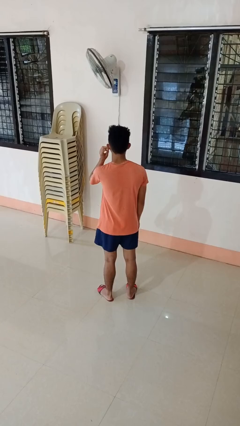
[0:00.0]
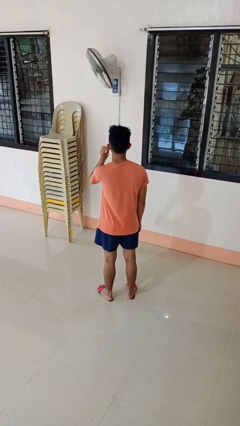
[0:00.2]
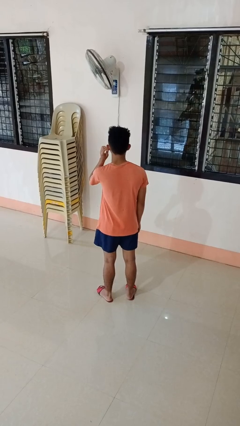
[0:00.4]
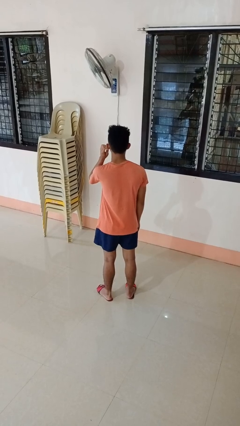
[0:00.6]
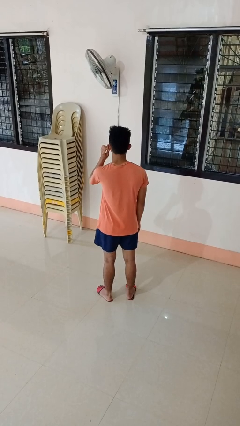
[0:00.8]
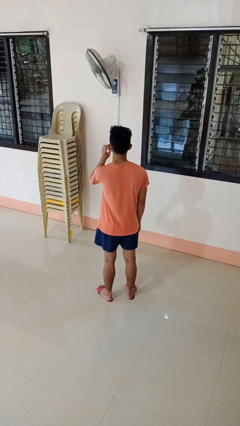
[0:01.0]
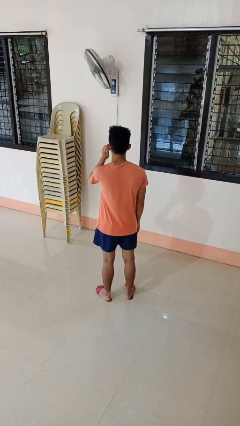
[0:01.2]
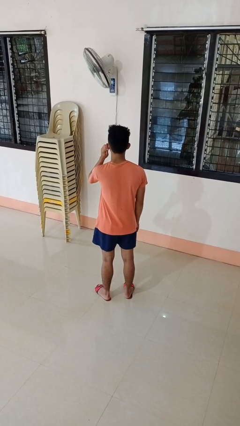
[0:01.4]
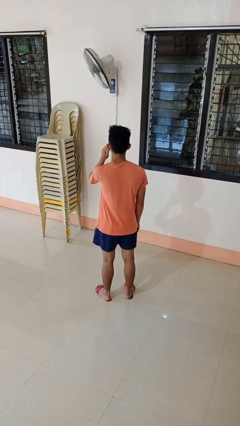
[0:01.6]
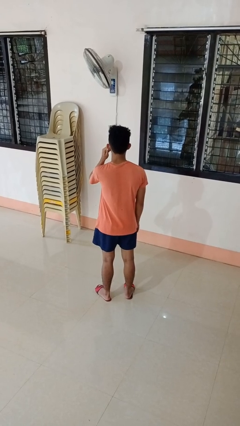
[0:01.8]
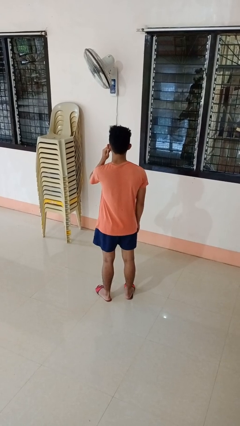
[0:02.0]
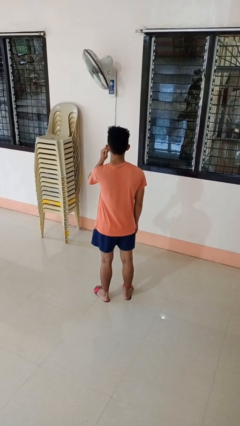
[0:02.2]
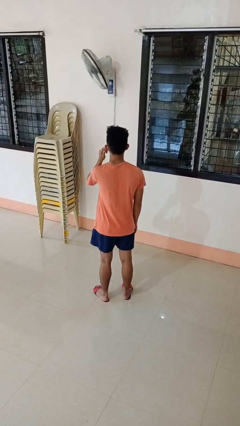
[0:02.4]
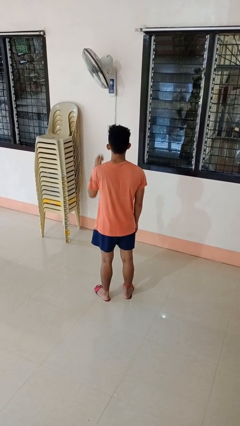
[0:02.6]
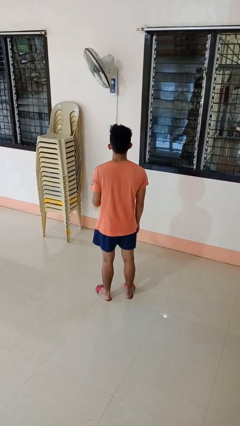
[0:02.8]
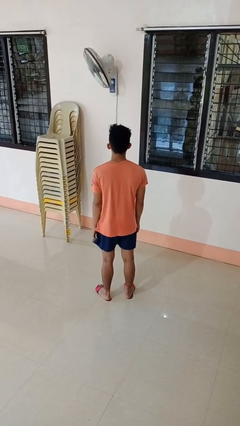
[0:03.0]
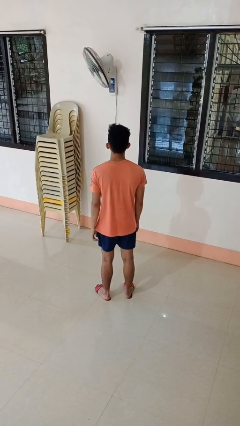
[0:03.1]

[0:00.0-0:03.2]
person touches earlobe

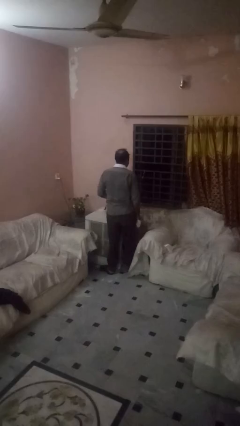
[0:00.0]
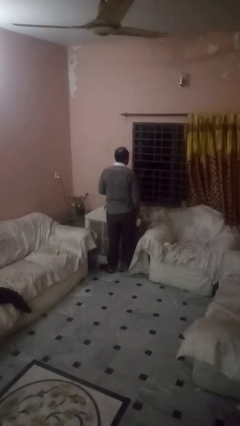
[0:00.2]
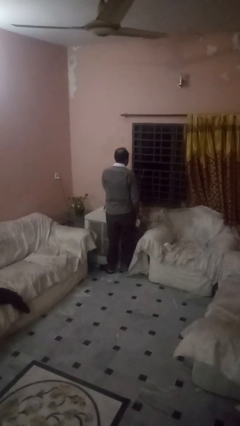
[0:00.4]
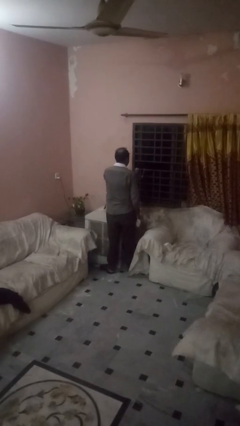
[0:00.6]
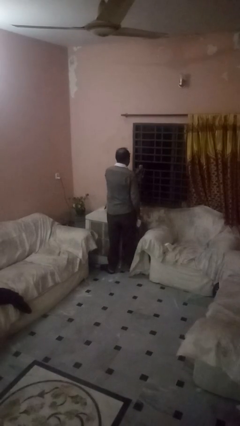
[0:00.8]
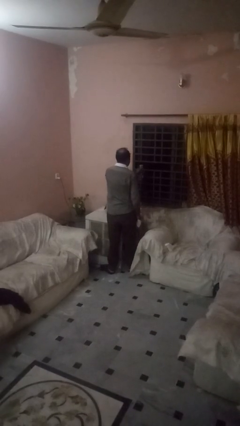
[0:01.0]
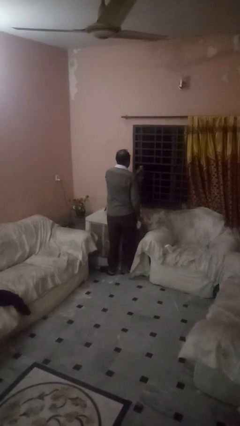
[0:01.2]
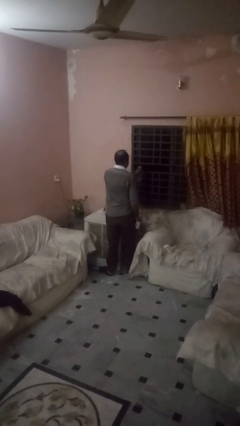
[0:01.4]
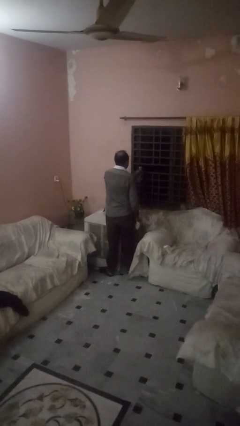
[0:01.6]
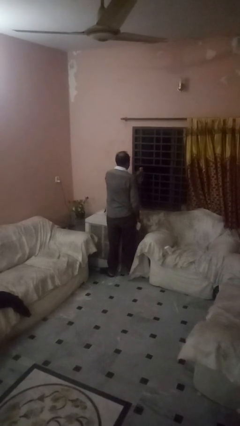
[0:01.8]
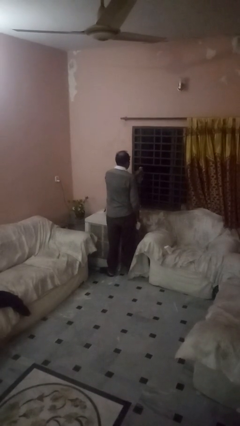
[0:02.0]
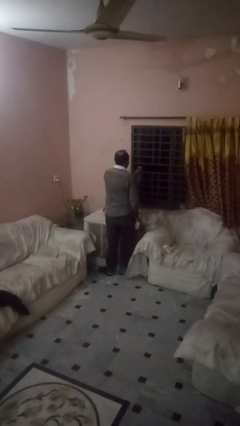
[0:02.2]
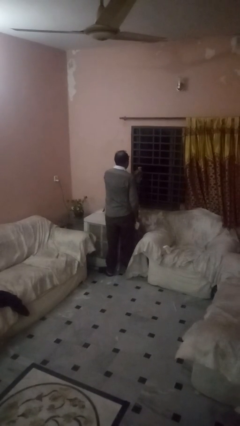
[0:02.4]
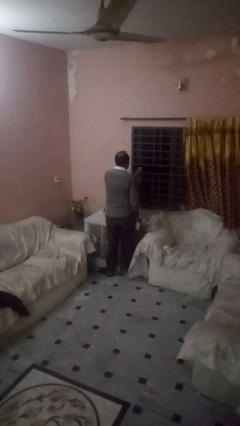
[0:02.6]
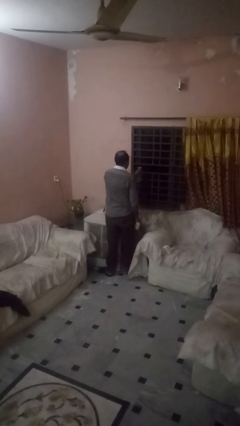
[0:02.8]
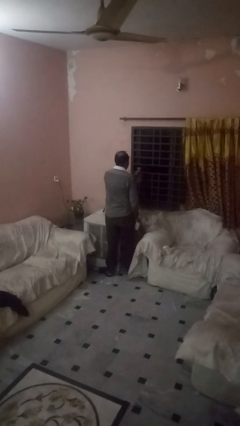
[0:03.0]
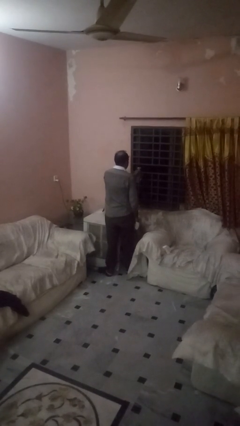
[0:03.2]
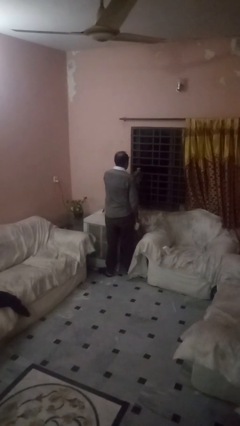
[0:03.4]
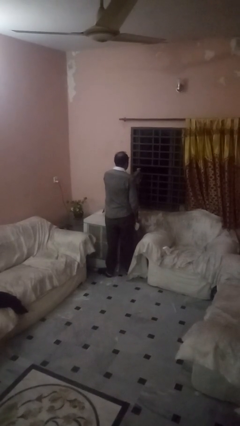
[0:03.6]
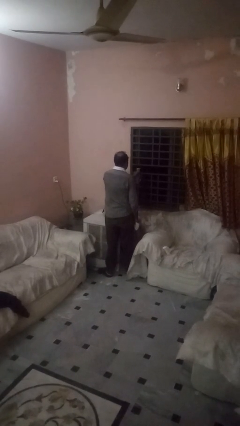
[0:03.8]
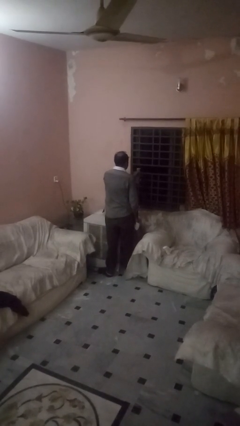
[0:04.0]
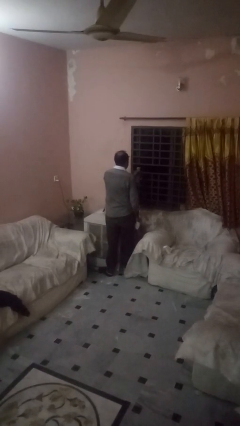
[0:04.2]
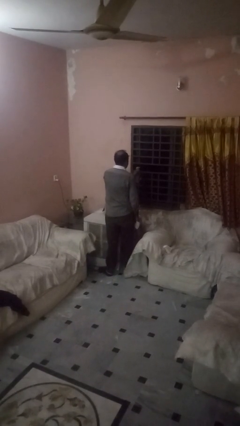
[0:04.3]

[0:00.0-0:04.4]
person sprays from bottle

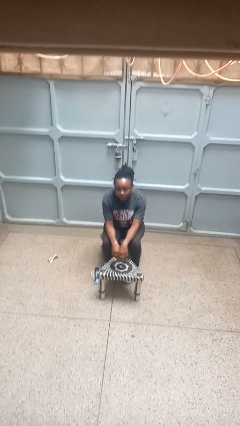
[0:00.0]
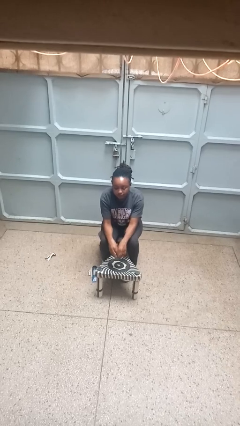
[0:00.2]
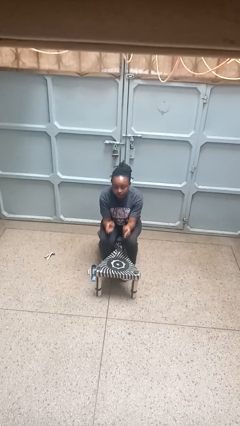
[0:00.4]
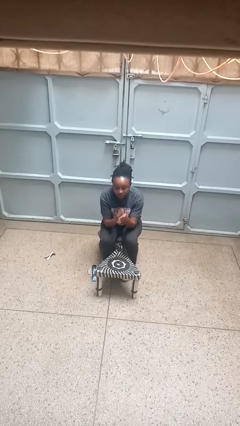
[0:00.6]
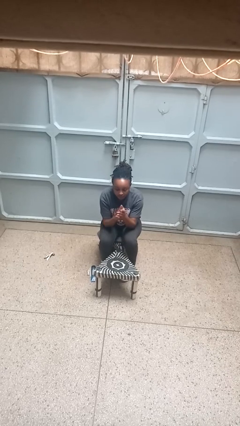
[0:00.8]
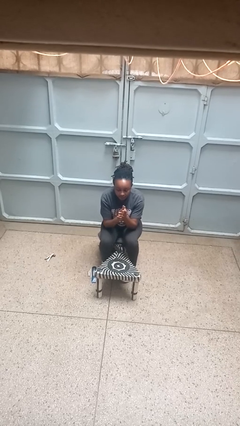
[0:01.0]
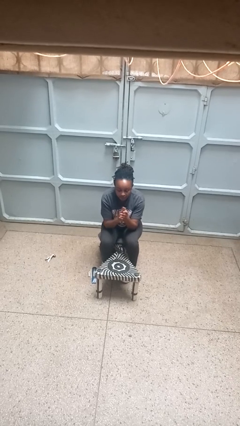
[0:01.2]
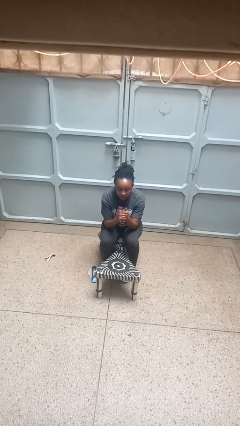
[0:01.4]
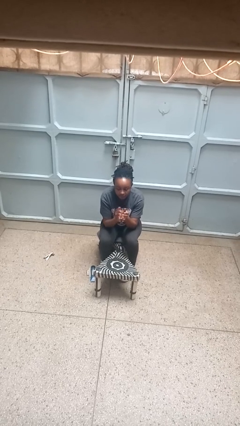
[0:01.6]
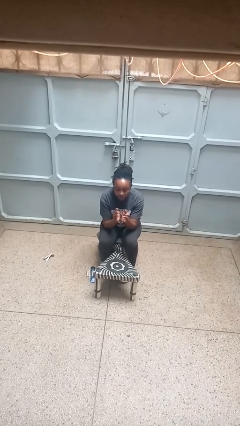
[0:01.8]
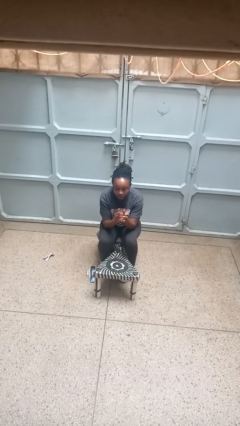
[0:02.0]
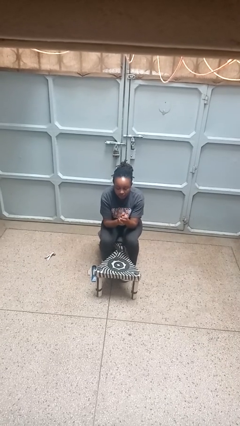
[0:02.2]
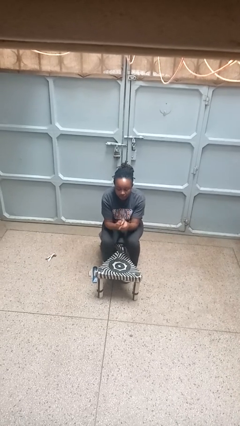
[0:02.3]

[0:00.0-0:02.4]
person claps hands

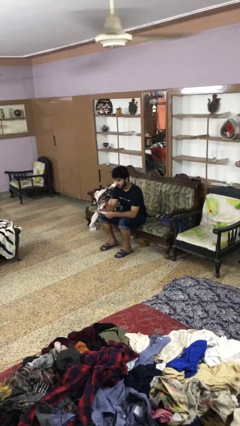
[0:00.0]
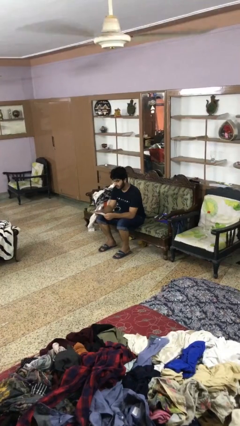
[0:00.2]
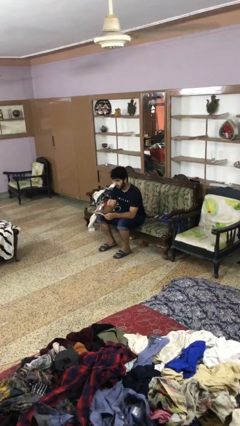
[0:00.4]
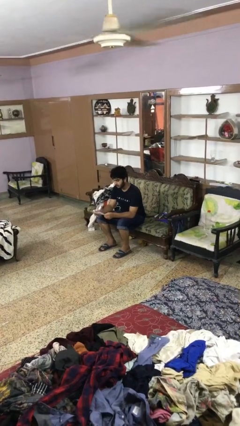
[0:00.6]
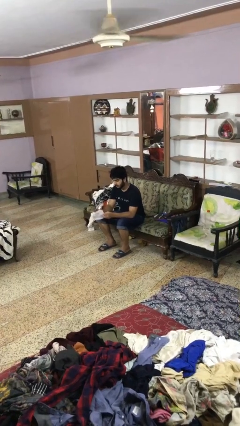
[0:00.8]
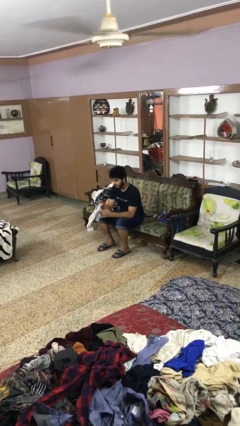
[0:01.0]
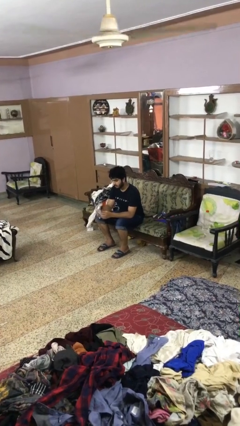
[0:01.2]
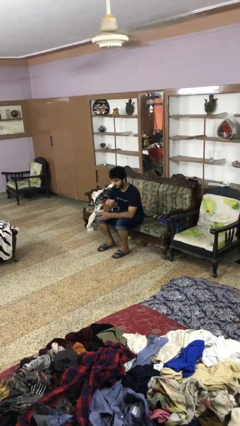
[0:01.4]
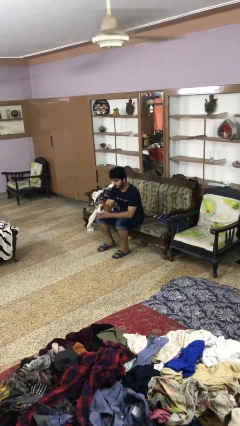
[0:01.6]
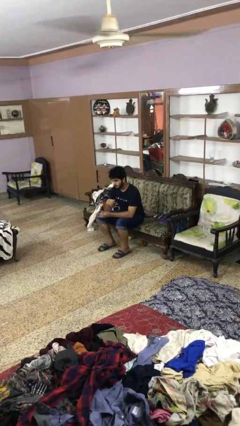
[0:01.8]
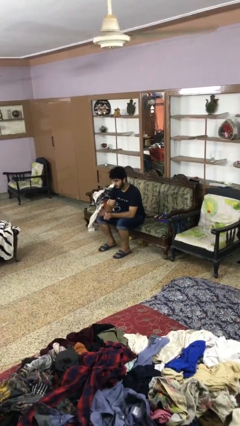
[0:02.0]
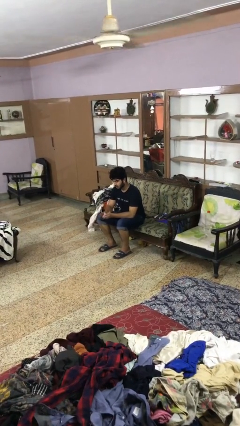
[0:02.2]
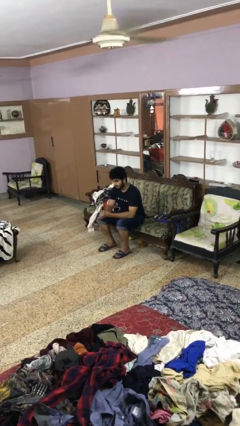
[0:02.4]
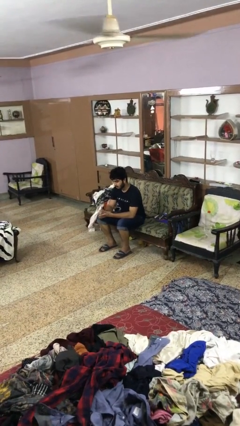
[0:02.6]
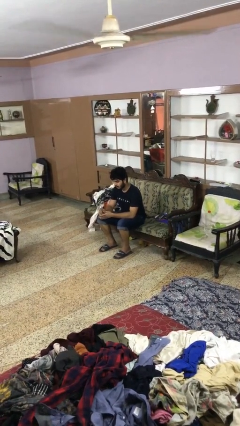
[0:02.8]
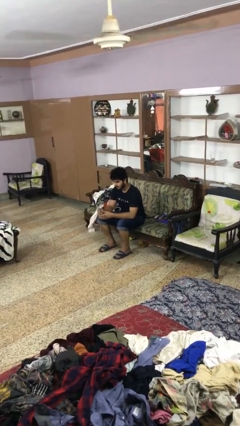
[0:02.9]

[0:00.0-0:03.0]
person crumples paper

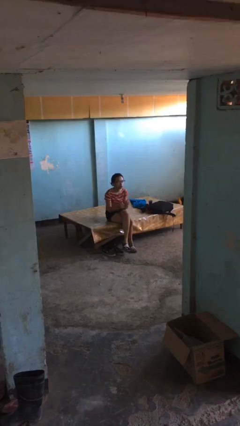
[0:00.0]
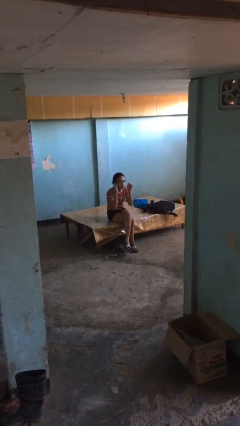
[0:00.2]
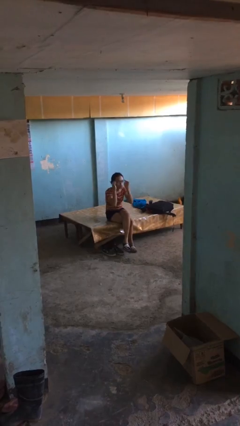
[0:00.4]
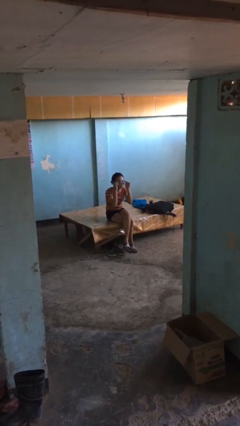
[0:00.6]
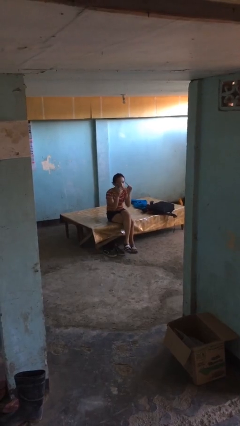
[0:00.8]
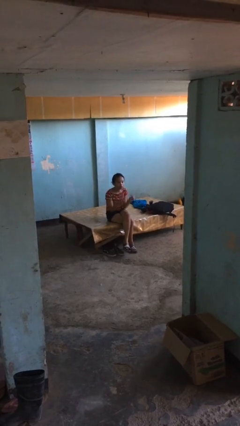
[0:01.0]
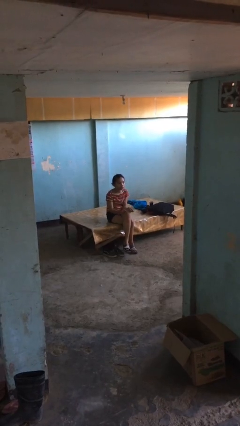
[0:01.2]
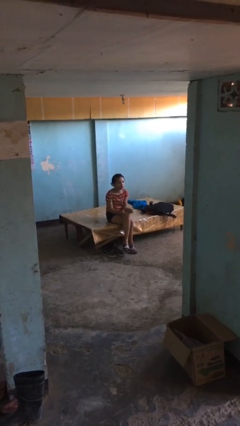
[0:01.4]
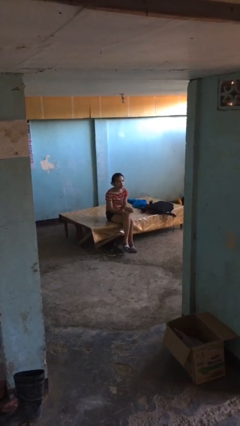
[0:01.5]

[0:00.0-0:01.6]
person takes off glasses

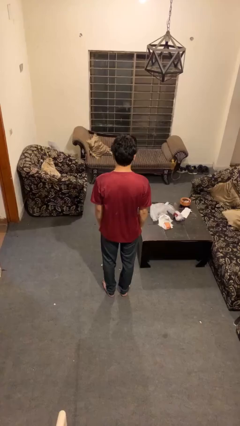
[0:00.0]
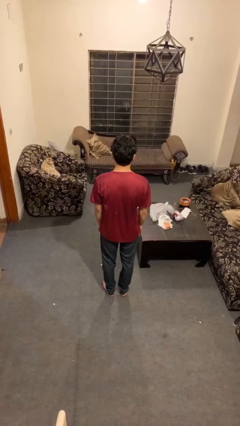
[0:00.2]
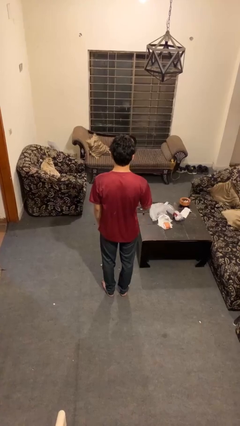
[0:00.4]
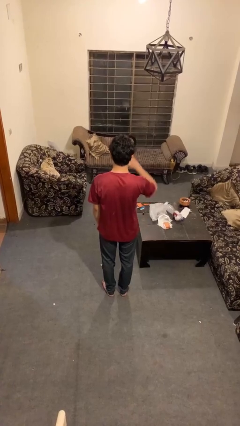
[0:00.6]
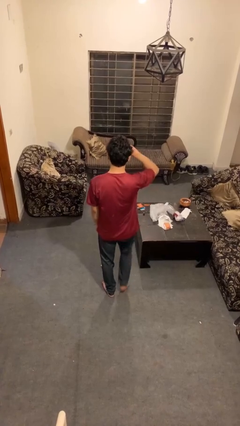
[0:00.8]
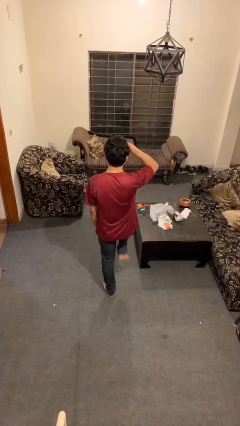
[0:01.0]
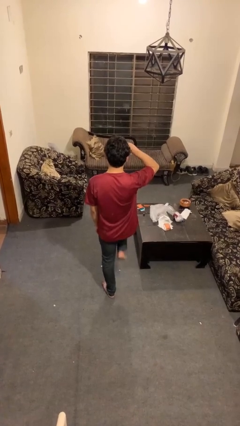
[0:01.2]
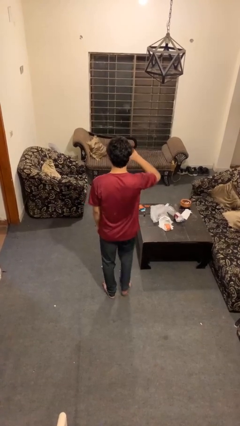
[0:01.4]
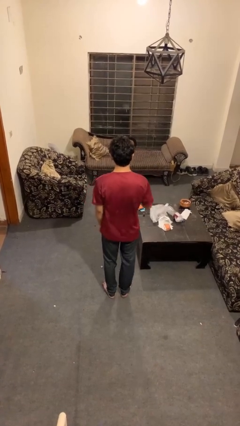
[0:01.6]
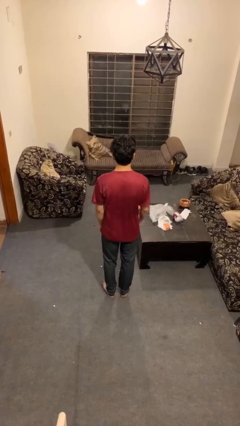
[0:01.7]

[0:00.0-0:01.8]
person salutes

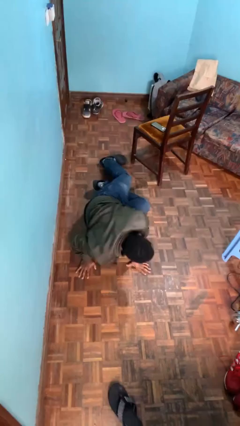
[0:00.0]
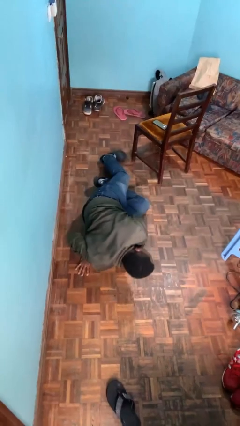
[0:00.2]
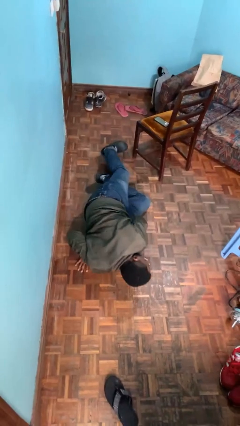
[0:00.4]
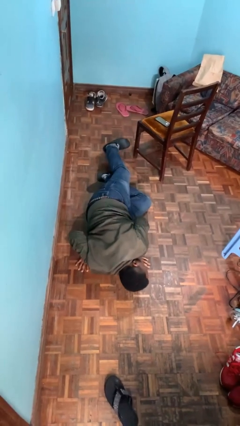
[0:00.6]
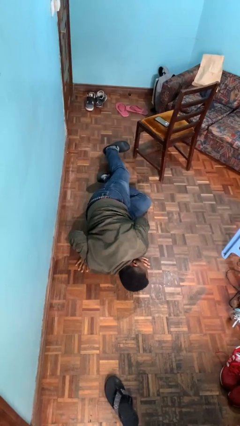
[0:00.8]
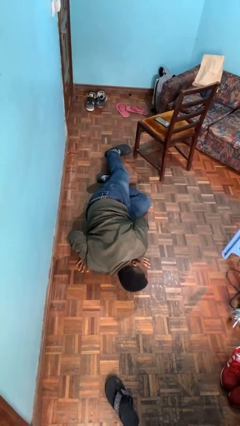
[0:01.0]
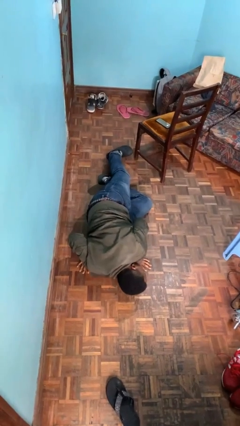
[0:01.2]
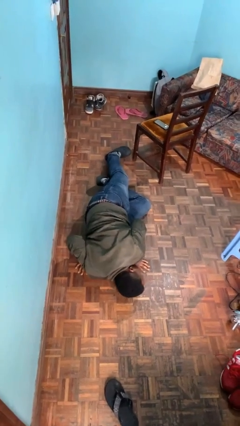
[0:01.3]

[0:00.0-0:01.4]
person lies down on floor
